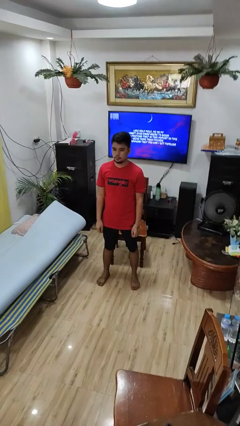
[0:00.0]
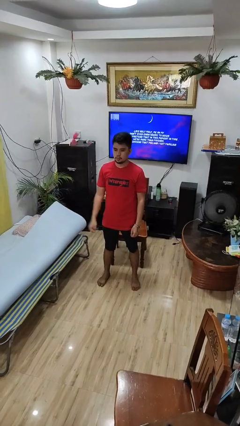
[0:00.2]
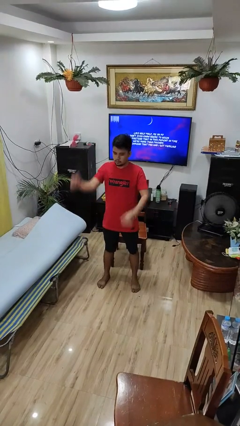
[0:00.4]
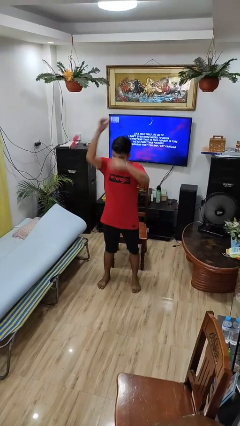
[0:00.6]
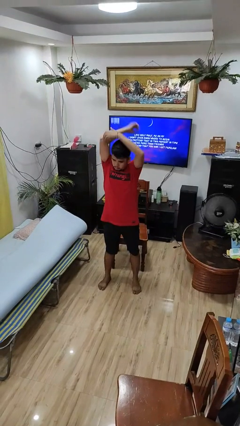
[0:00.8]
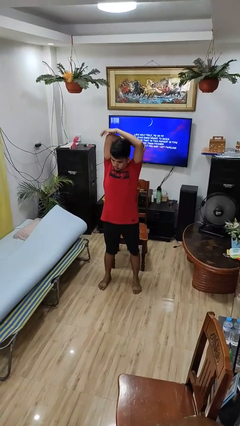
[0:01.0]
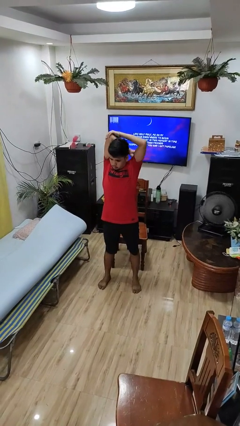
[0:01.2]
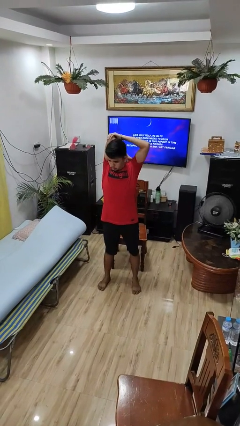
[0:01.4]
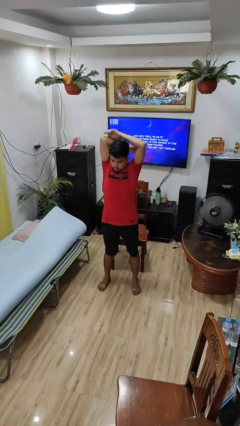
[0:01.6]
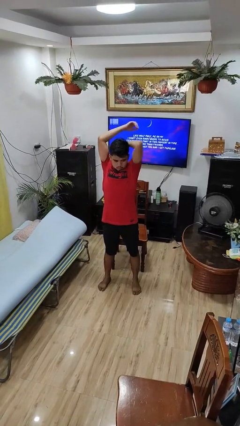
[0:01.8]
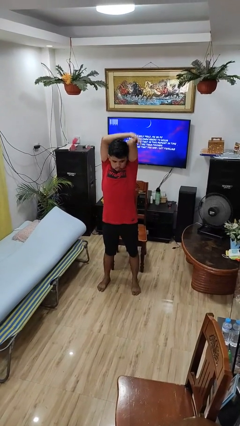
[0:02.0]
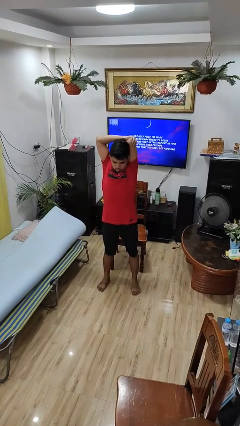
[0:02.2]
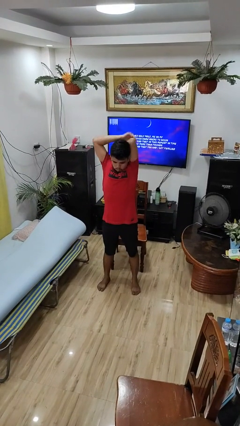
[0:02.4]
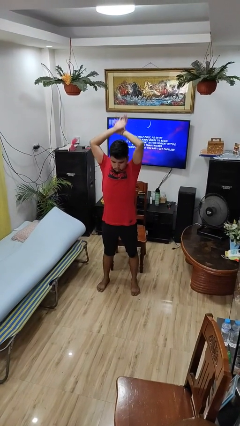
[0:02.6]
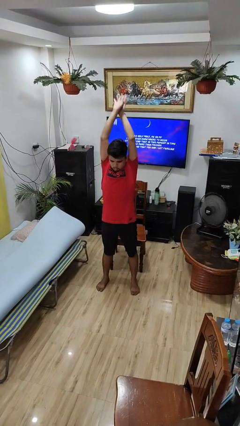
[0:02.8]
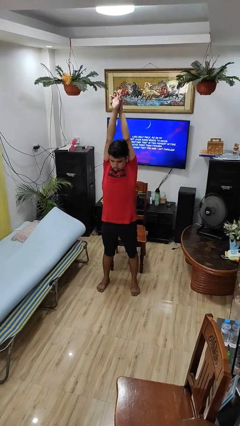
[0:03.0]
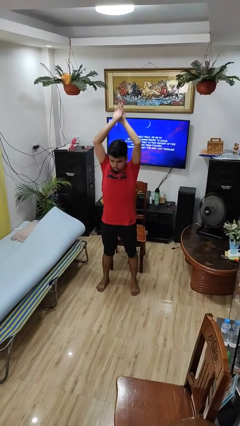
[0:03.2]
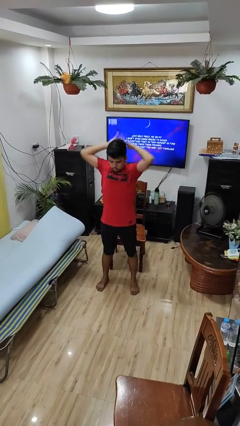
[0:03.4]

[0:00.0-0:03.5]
person stretches arms over head

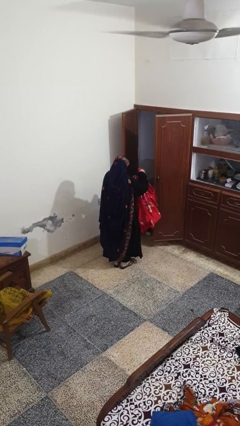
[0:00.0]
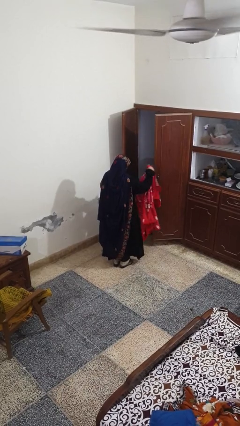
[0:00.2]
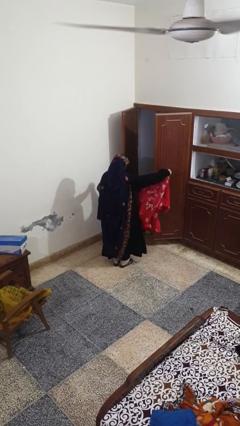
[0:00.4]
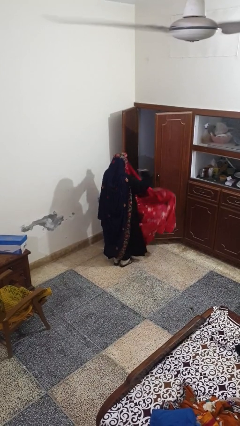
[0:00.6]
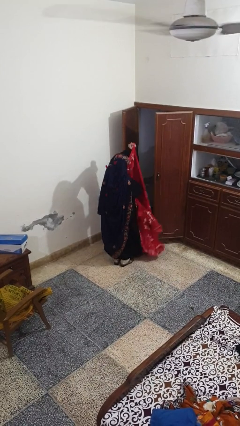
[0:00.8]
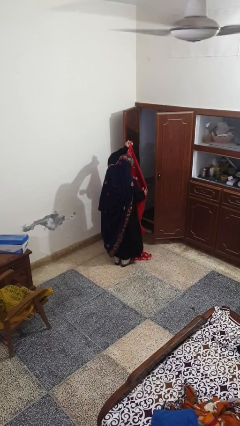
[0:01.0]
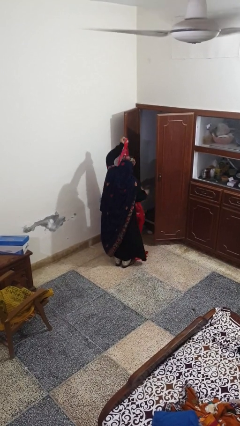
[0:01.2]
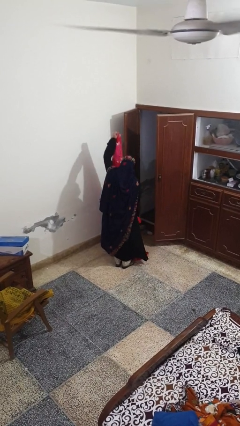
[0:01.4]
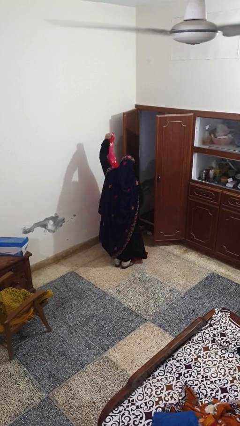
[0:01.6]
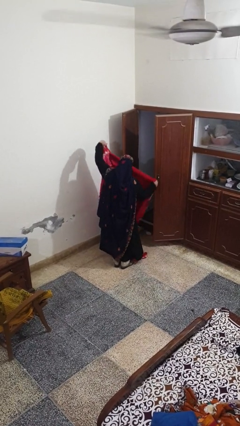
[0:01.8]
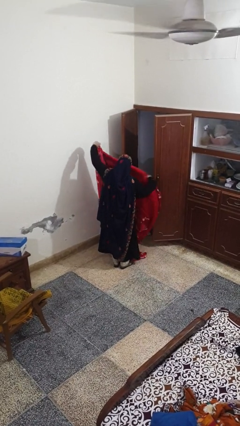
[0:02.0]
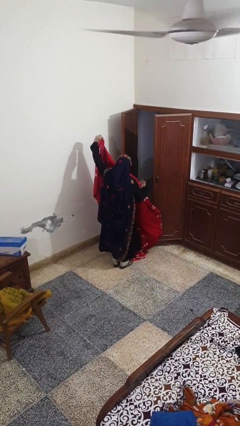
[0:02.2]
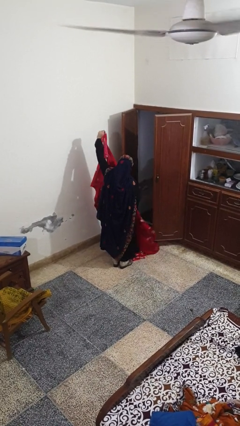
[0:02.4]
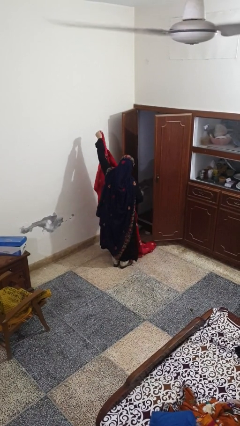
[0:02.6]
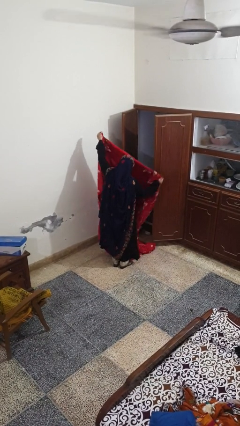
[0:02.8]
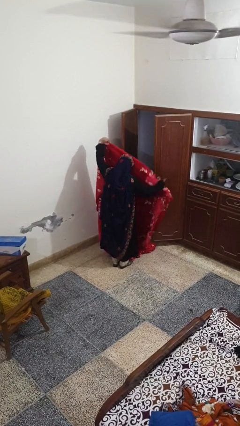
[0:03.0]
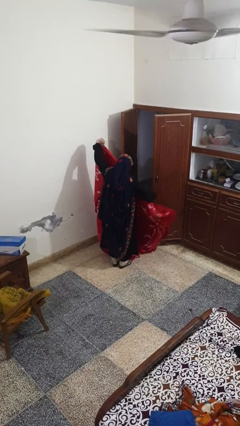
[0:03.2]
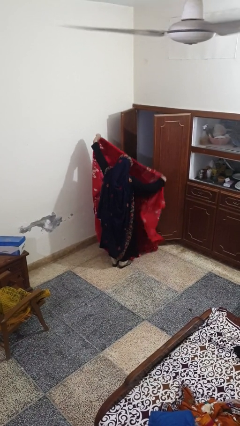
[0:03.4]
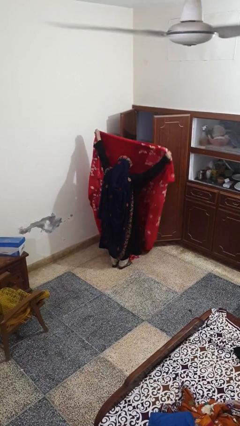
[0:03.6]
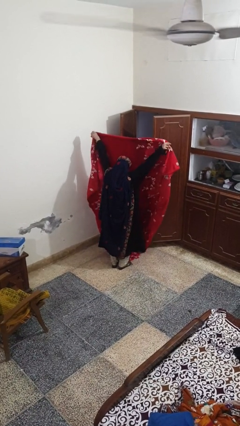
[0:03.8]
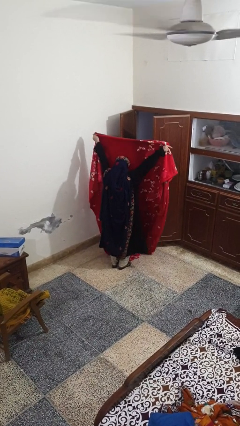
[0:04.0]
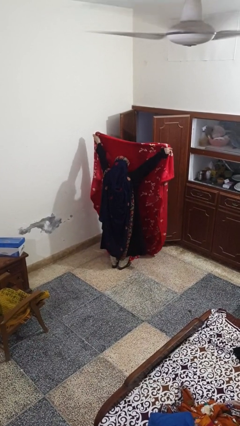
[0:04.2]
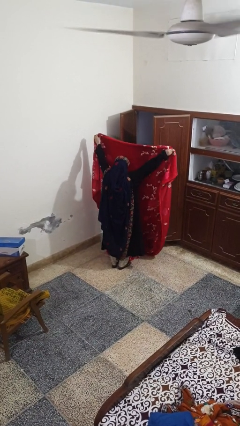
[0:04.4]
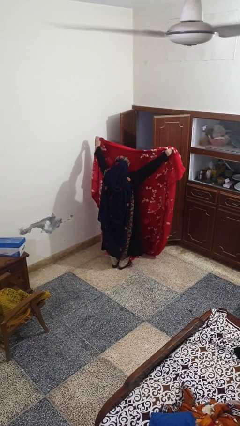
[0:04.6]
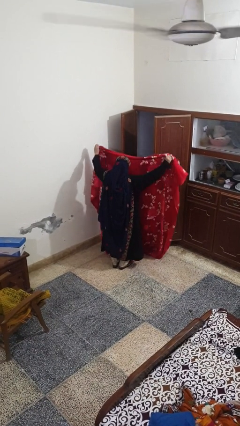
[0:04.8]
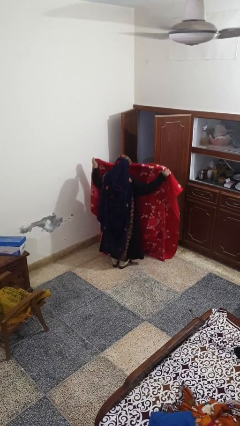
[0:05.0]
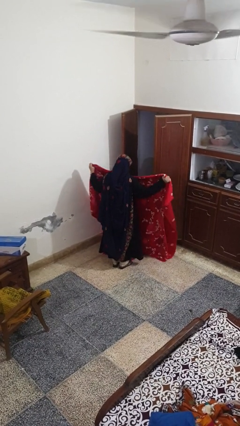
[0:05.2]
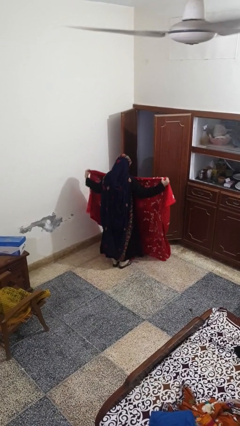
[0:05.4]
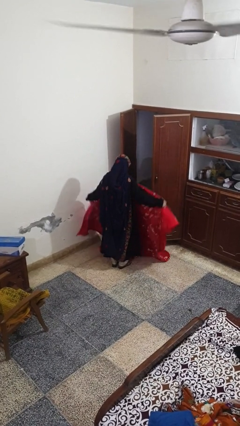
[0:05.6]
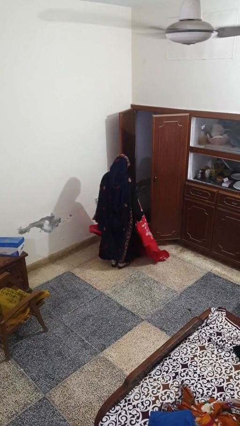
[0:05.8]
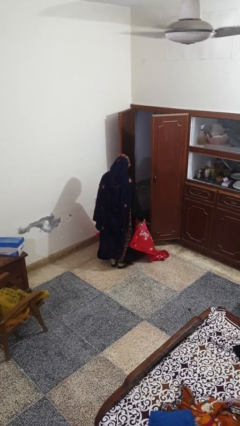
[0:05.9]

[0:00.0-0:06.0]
person unfolds blanket

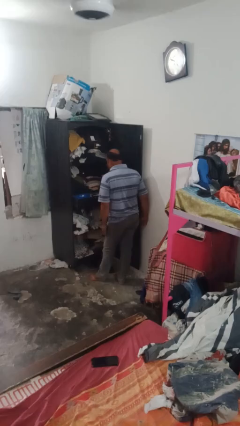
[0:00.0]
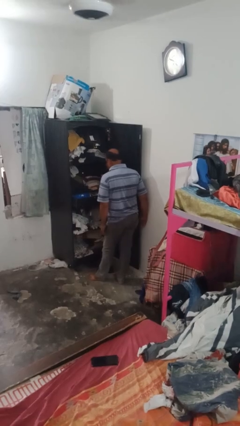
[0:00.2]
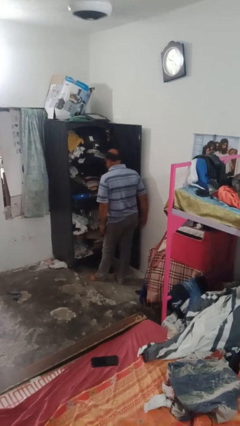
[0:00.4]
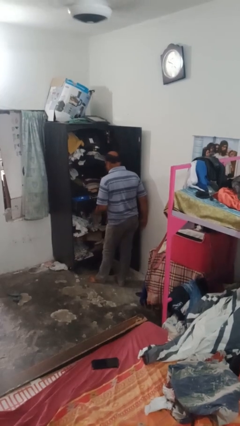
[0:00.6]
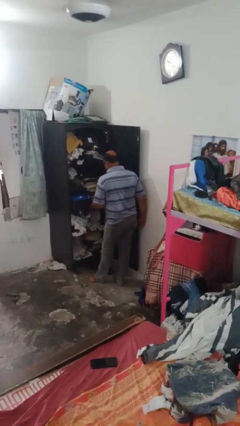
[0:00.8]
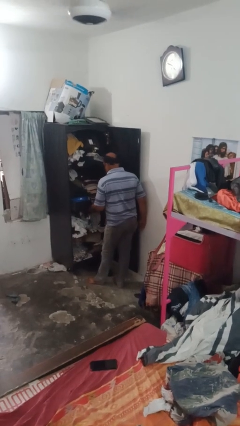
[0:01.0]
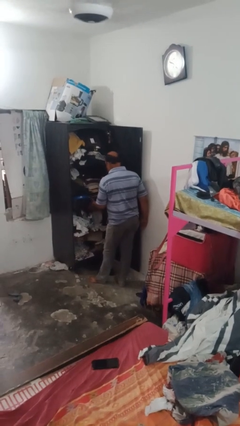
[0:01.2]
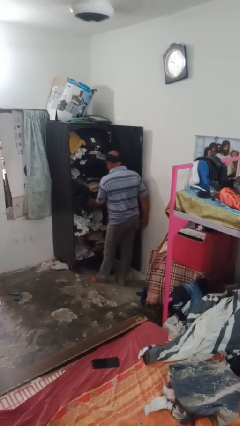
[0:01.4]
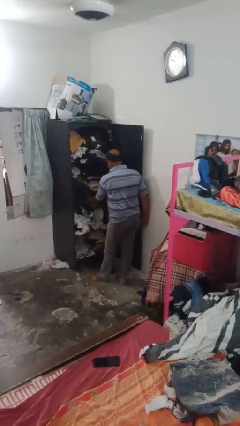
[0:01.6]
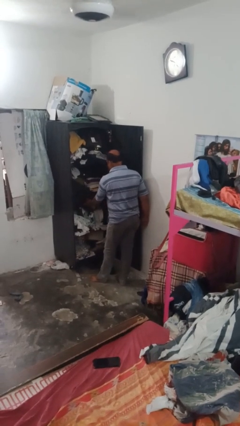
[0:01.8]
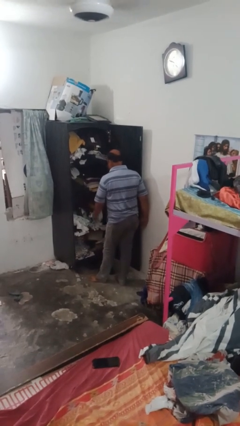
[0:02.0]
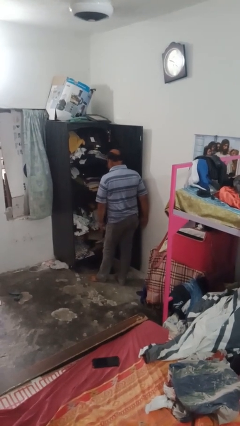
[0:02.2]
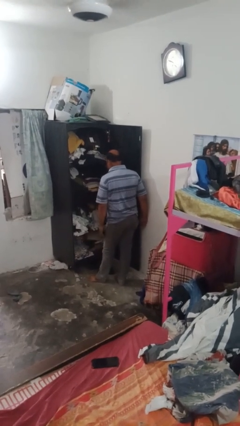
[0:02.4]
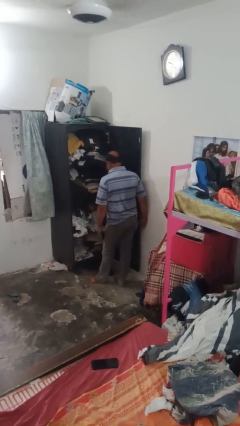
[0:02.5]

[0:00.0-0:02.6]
person closes dresser drawer

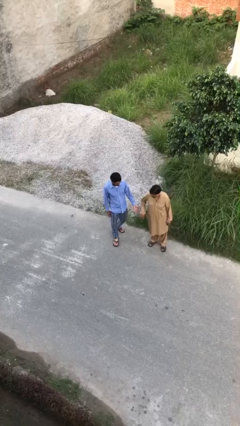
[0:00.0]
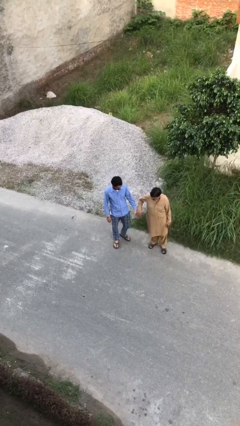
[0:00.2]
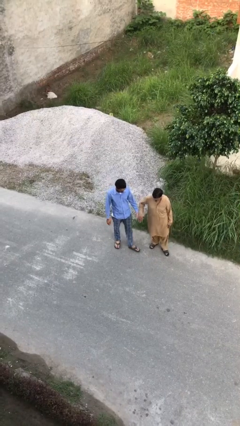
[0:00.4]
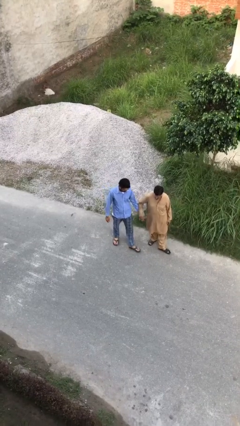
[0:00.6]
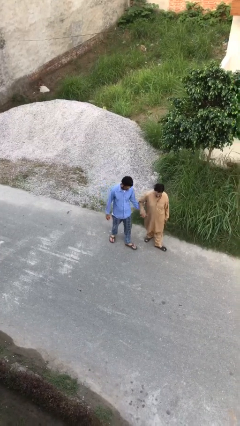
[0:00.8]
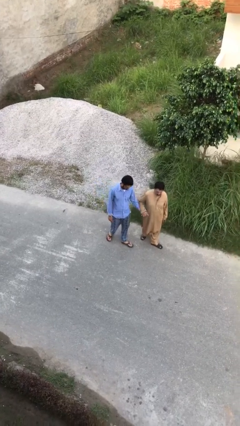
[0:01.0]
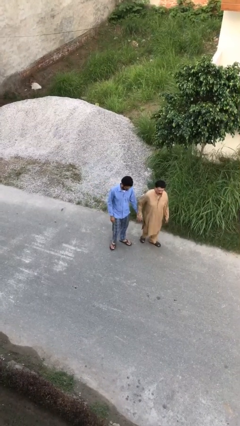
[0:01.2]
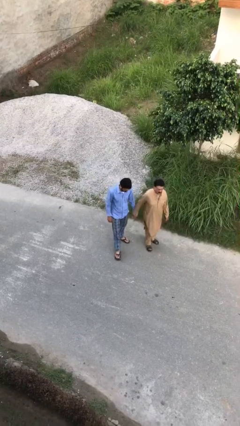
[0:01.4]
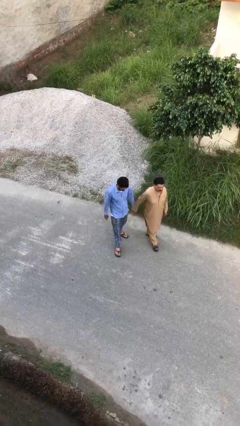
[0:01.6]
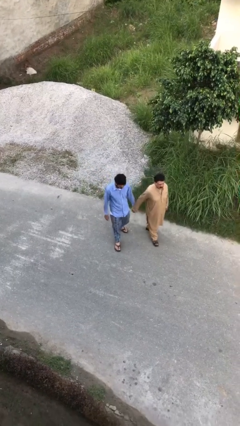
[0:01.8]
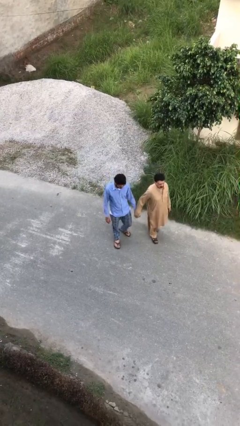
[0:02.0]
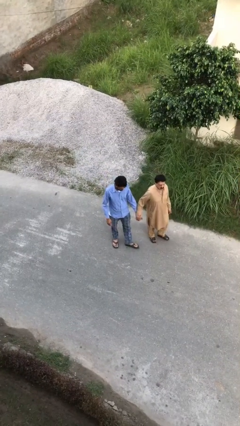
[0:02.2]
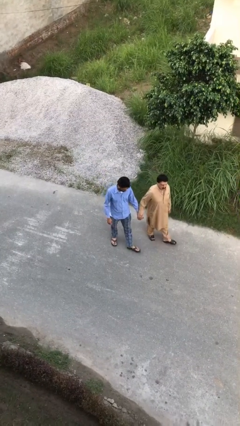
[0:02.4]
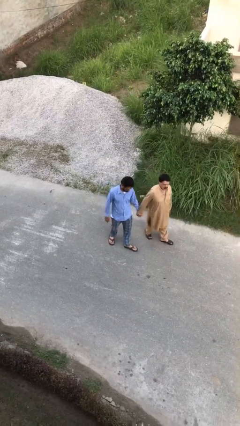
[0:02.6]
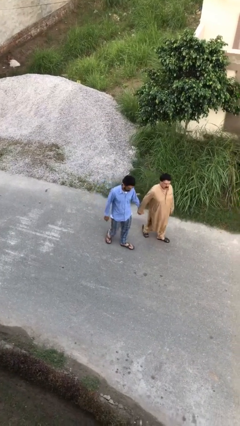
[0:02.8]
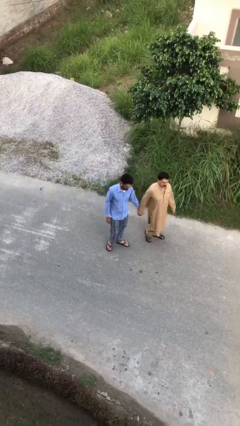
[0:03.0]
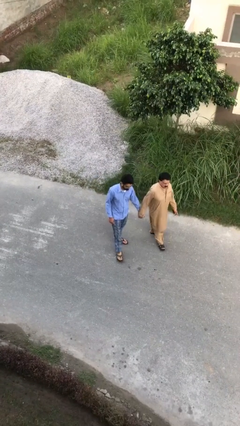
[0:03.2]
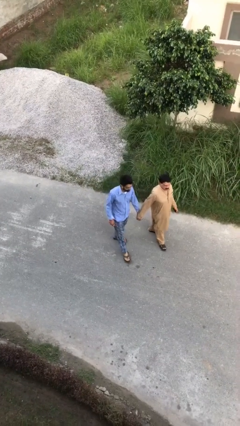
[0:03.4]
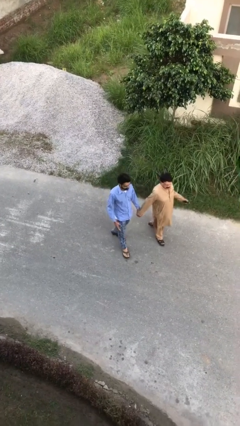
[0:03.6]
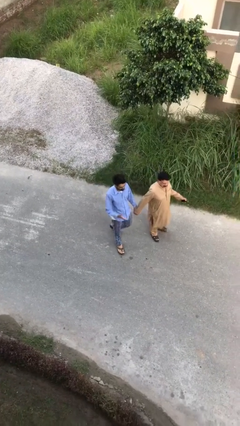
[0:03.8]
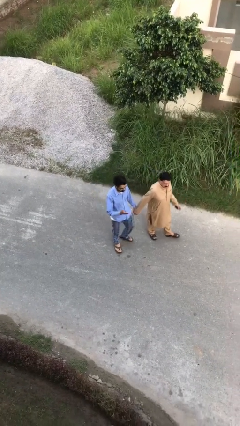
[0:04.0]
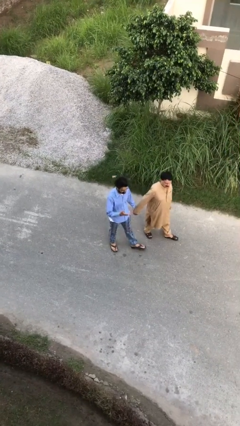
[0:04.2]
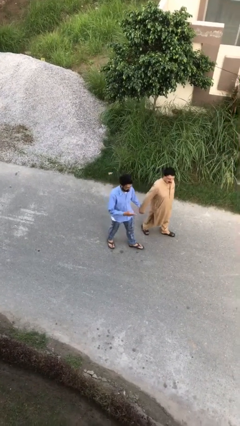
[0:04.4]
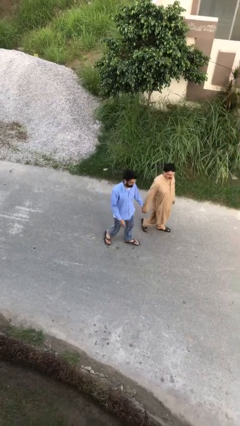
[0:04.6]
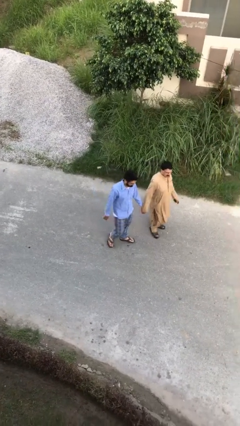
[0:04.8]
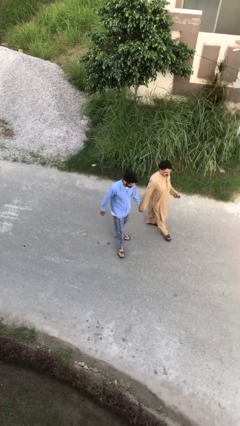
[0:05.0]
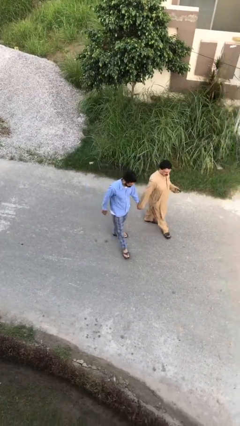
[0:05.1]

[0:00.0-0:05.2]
person holds hand

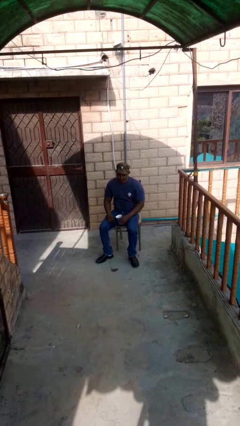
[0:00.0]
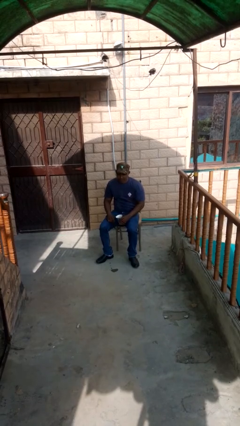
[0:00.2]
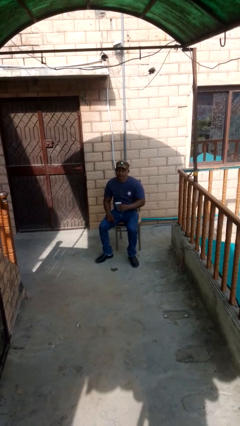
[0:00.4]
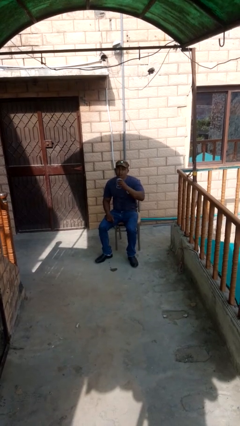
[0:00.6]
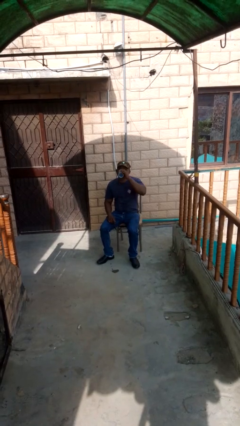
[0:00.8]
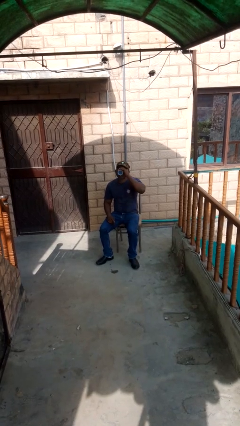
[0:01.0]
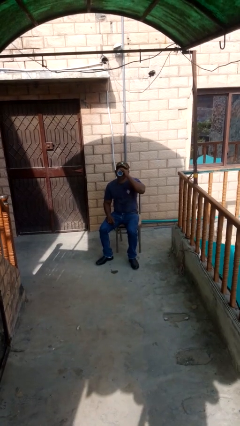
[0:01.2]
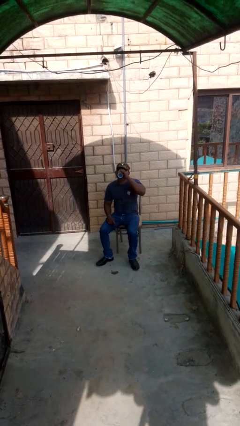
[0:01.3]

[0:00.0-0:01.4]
person drinks from mug
